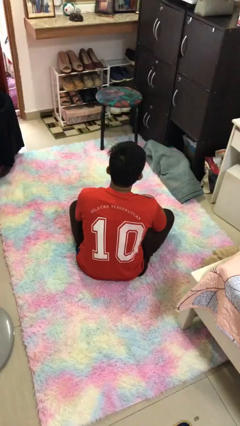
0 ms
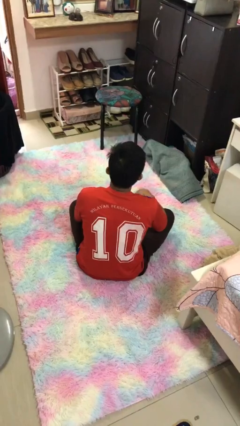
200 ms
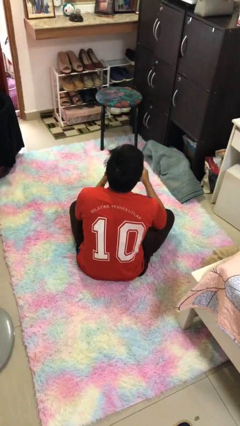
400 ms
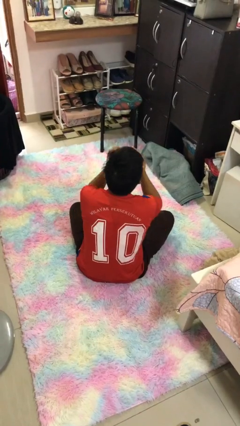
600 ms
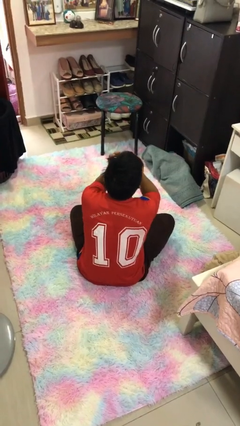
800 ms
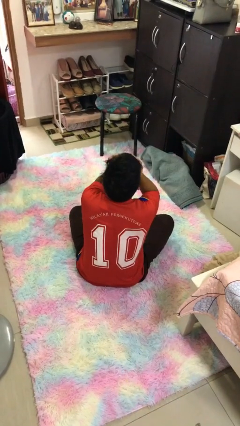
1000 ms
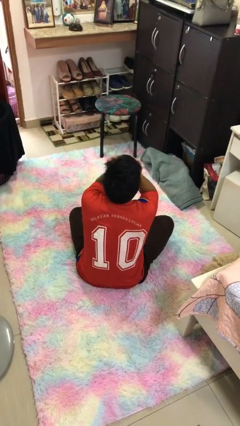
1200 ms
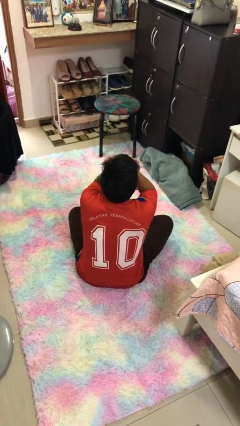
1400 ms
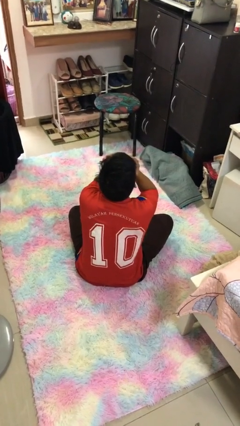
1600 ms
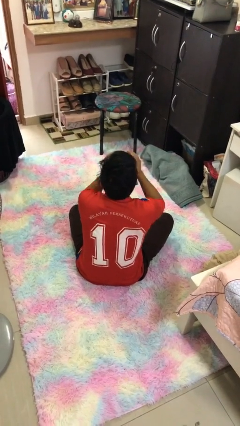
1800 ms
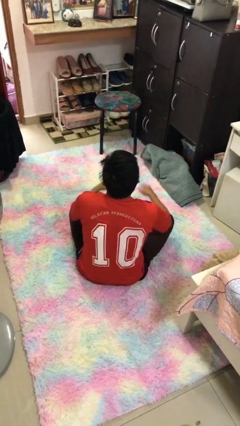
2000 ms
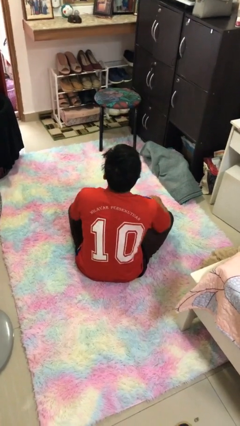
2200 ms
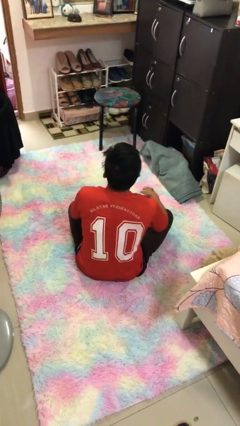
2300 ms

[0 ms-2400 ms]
person covers face with hands

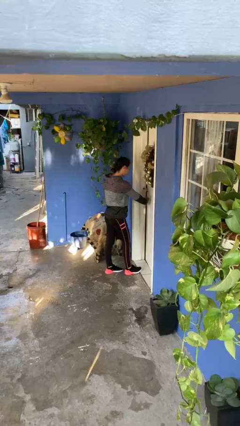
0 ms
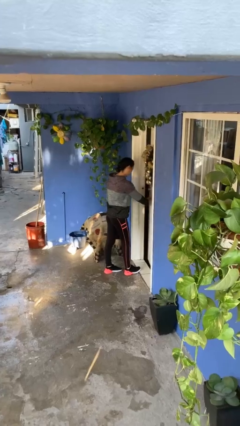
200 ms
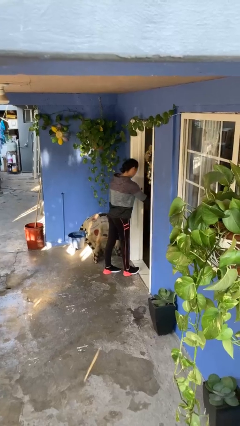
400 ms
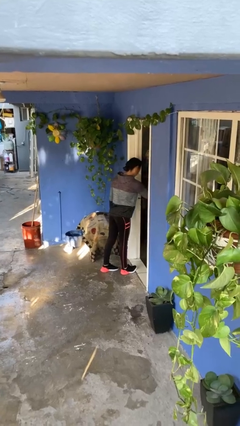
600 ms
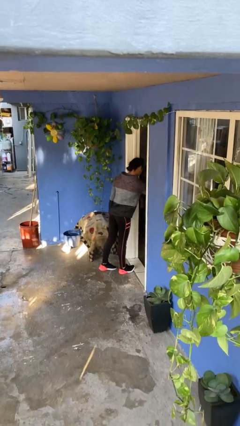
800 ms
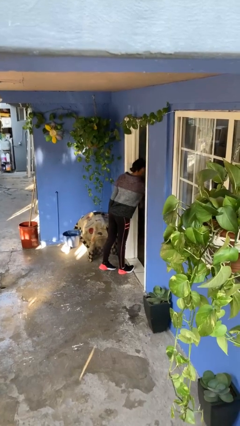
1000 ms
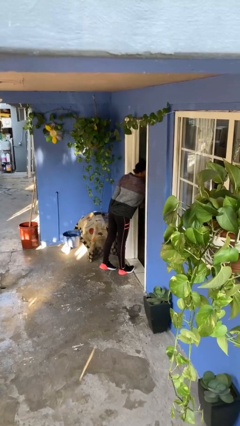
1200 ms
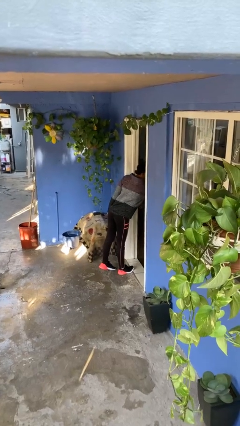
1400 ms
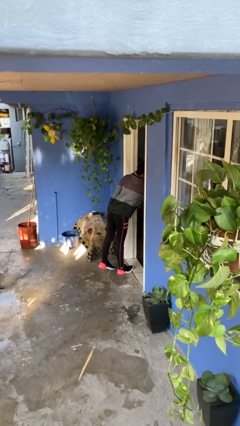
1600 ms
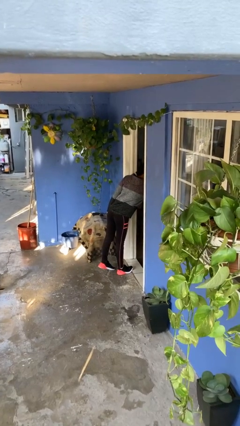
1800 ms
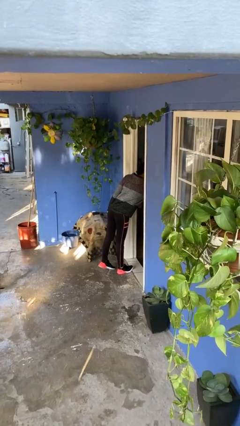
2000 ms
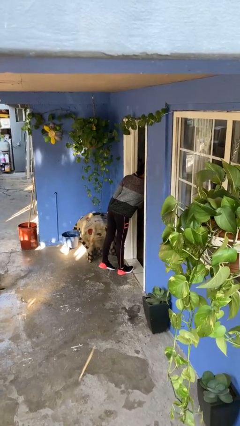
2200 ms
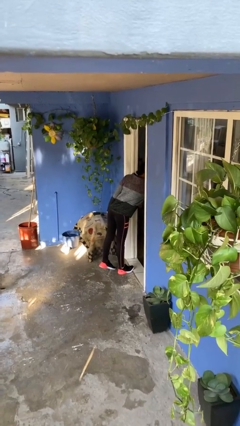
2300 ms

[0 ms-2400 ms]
person opens facility door

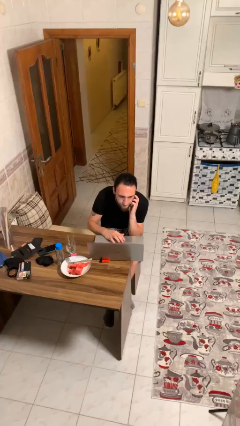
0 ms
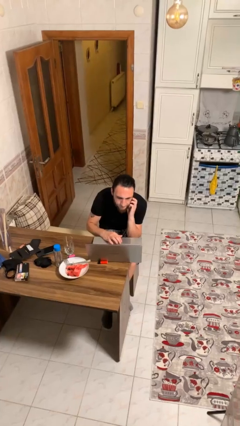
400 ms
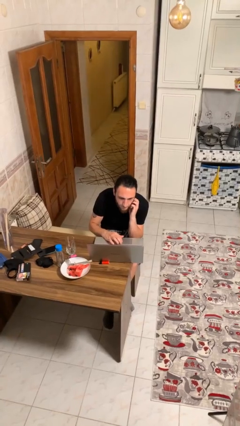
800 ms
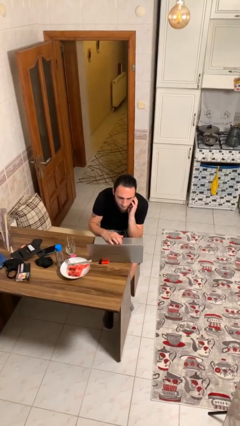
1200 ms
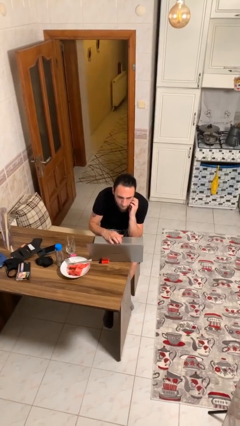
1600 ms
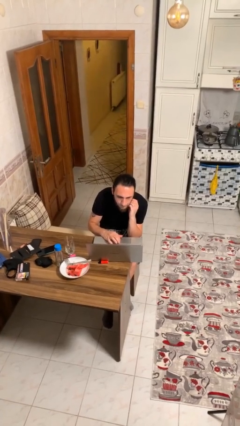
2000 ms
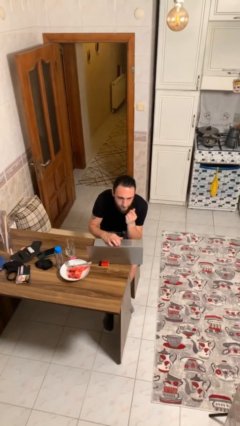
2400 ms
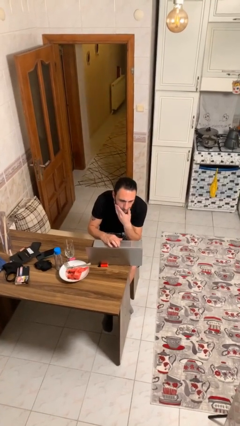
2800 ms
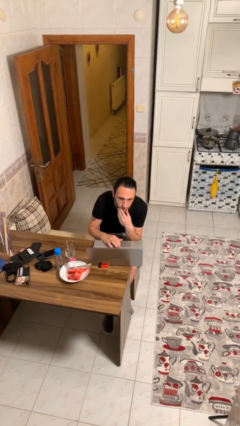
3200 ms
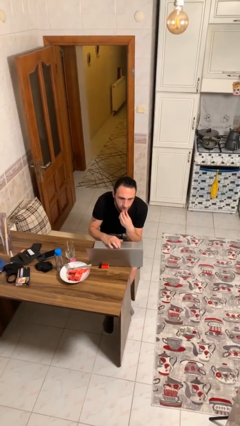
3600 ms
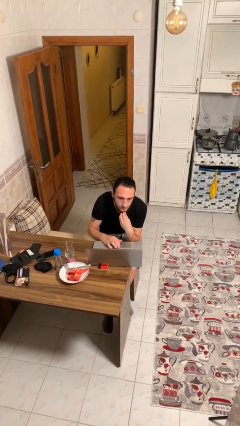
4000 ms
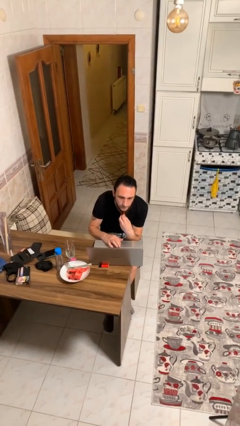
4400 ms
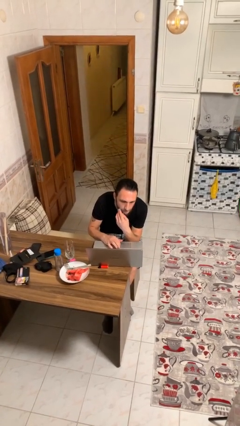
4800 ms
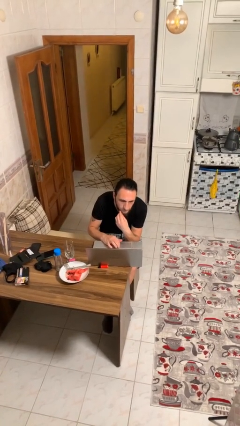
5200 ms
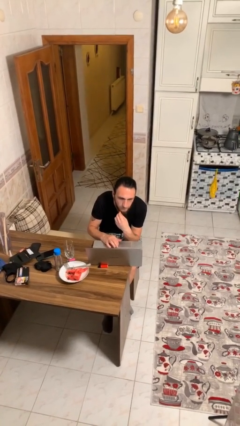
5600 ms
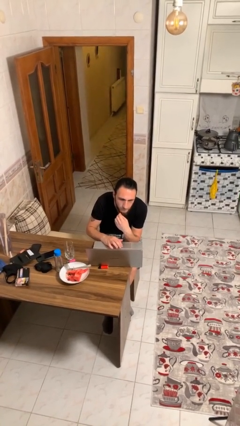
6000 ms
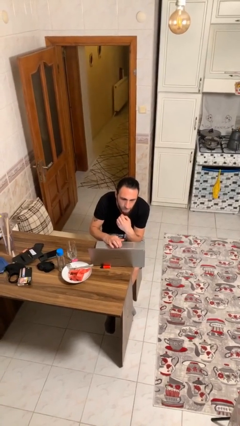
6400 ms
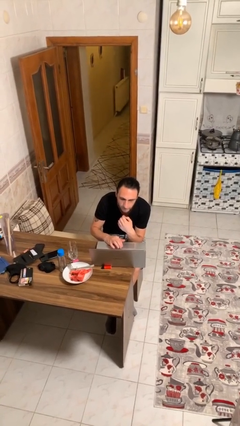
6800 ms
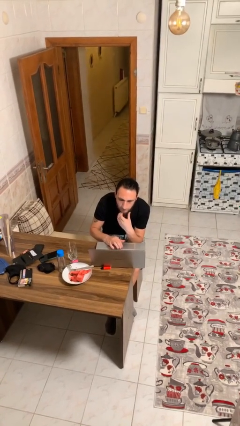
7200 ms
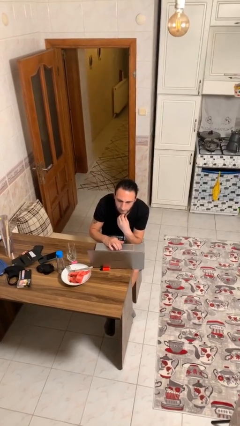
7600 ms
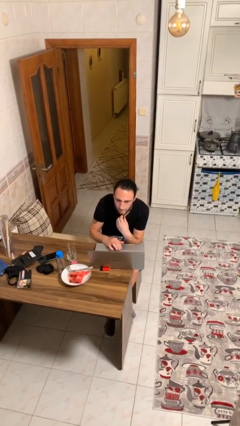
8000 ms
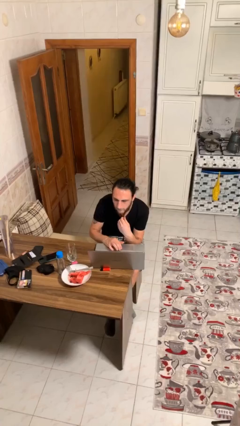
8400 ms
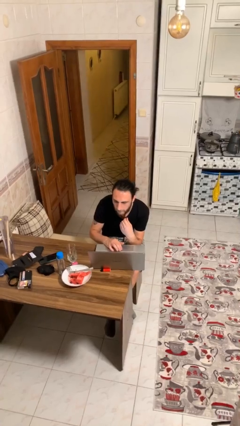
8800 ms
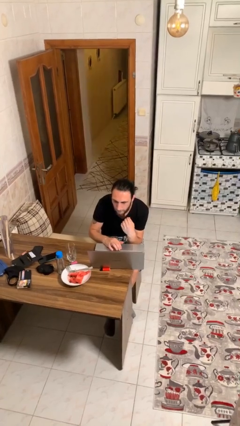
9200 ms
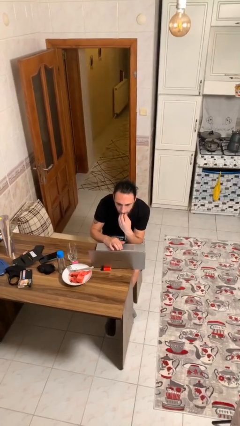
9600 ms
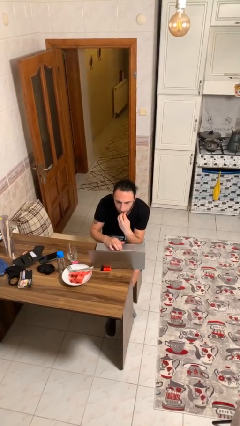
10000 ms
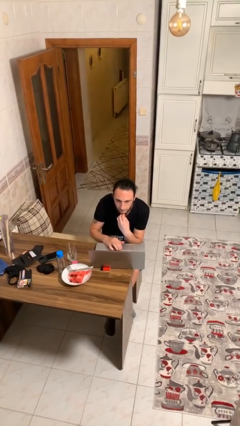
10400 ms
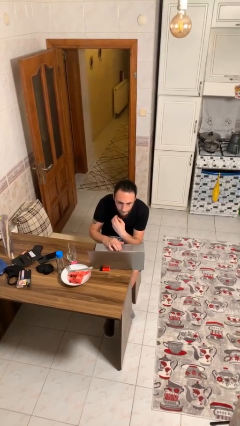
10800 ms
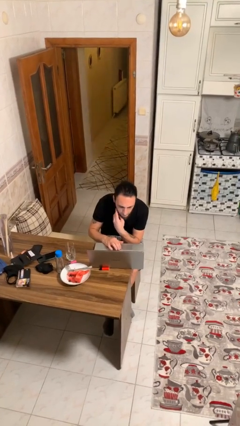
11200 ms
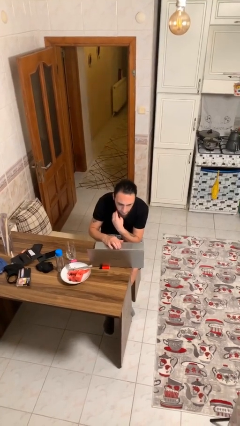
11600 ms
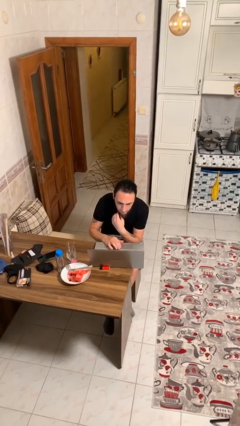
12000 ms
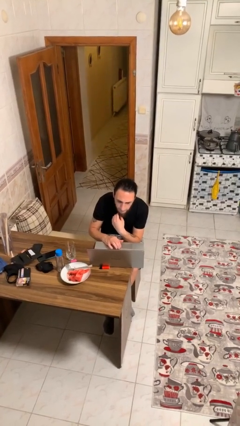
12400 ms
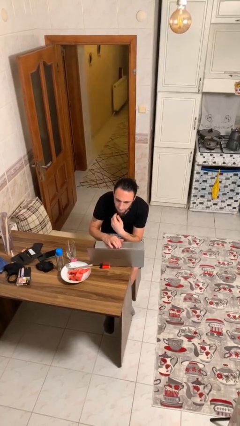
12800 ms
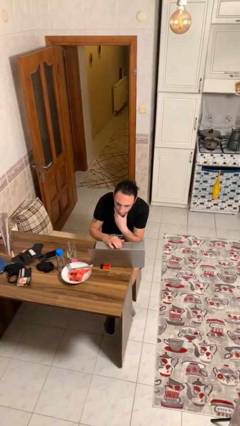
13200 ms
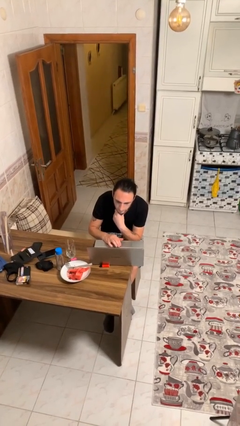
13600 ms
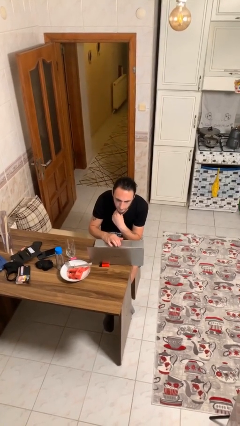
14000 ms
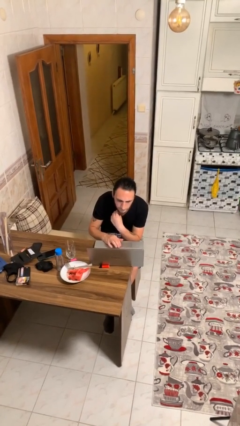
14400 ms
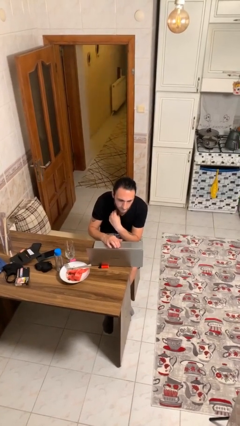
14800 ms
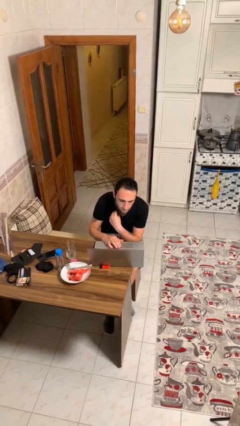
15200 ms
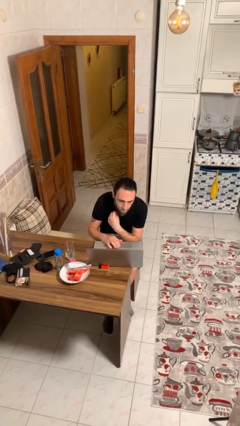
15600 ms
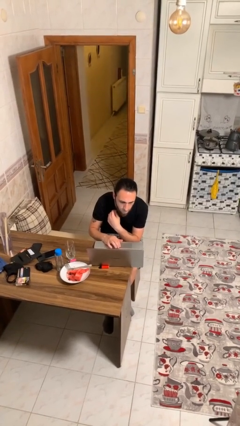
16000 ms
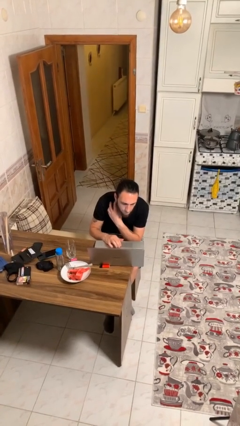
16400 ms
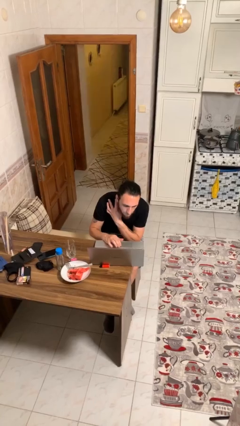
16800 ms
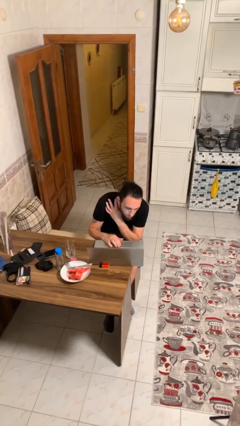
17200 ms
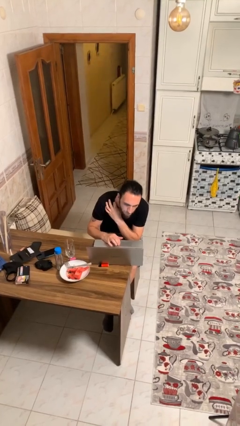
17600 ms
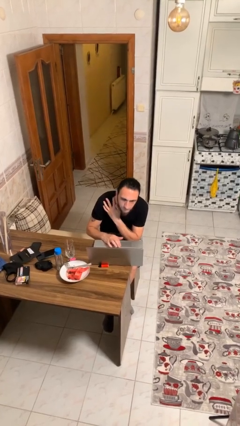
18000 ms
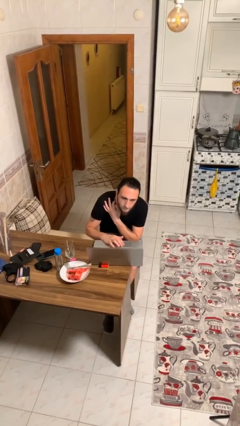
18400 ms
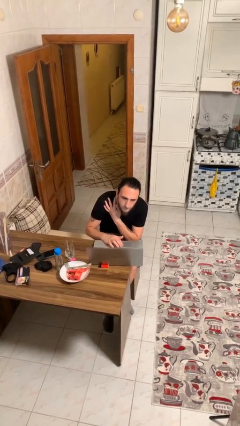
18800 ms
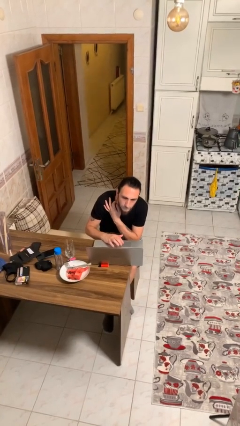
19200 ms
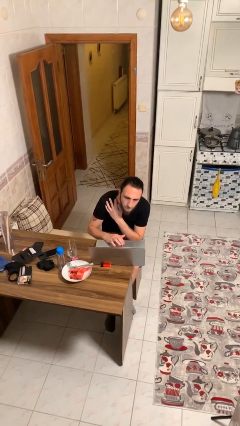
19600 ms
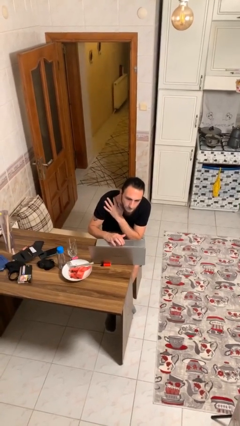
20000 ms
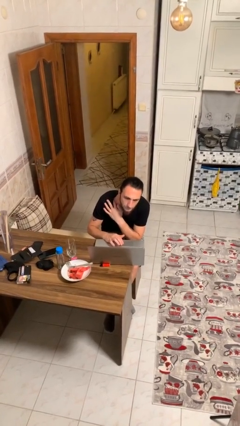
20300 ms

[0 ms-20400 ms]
person interacts with laptop

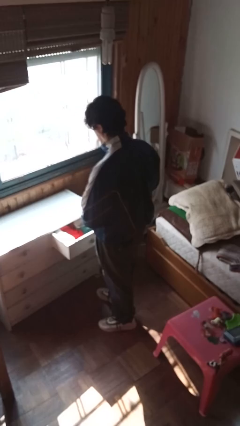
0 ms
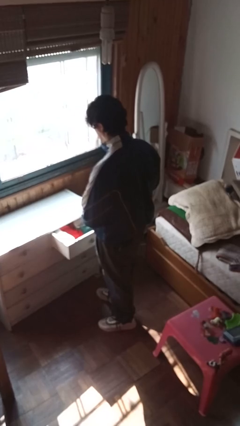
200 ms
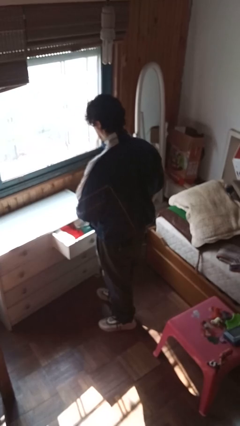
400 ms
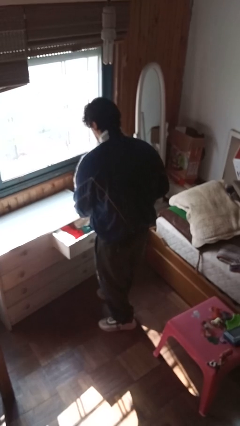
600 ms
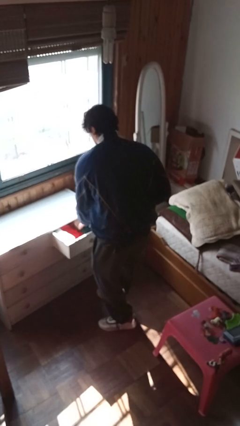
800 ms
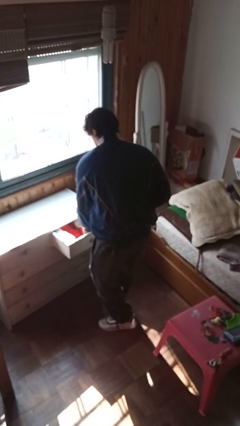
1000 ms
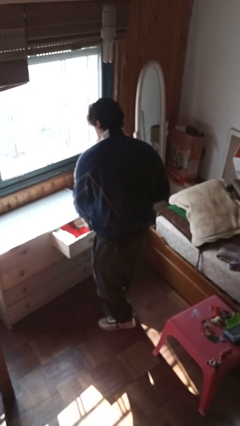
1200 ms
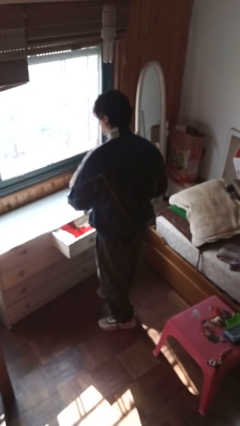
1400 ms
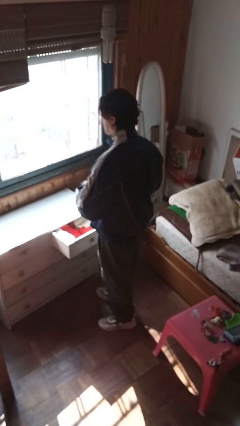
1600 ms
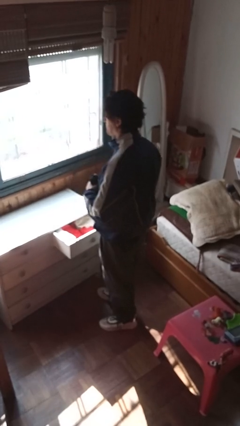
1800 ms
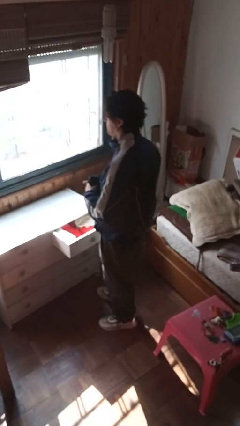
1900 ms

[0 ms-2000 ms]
person takes clothes from dresser

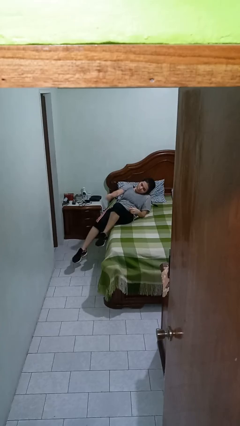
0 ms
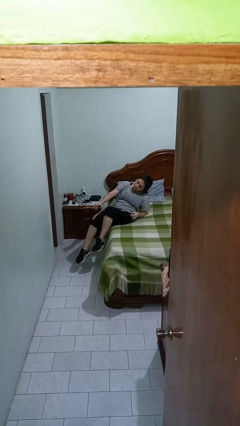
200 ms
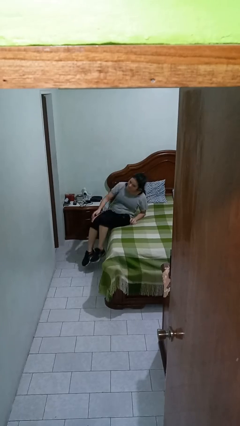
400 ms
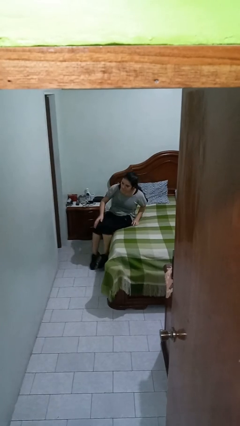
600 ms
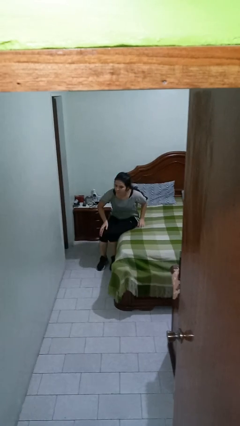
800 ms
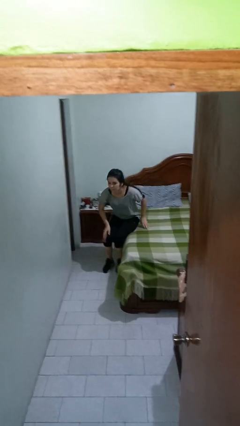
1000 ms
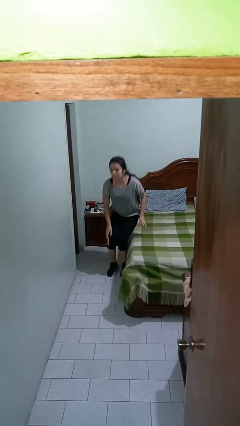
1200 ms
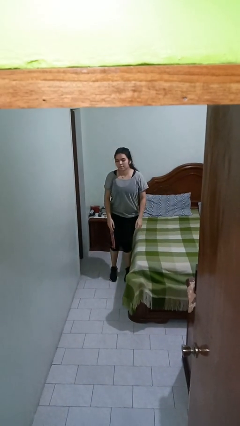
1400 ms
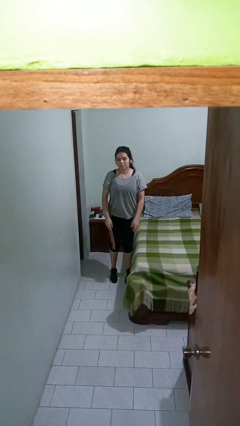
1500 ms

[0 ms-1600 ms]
person stands up
